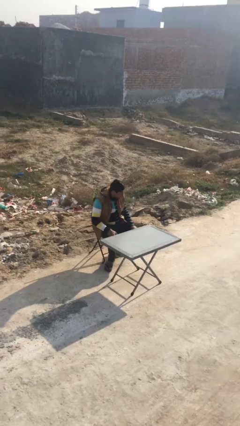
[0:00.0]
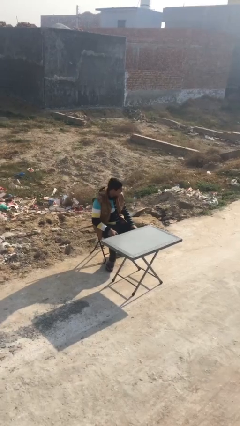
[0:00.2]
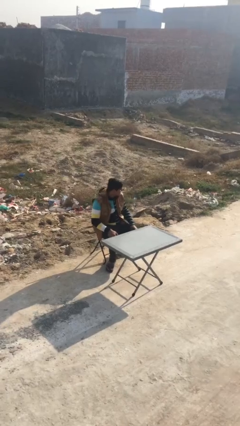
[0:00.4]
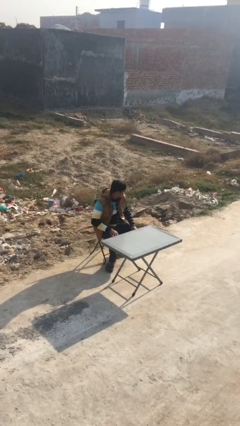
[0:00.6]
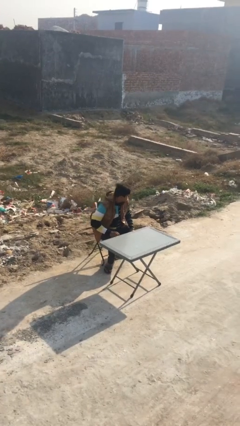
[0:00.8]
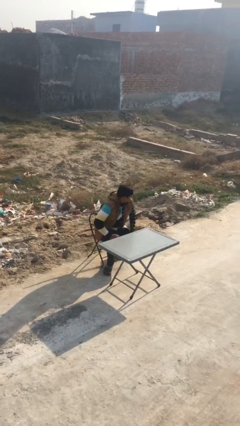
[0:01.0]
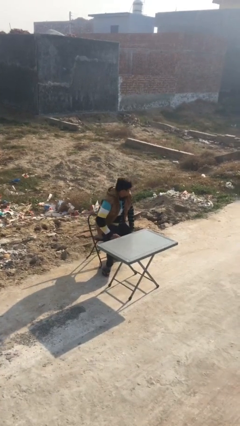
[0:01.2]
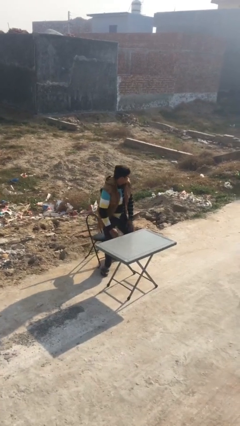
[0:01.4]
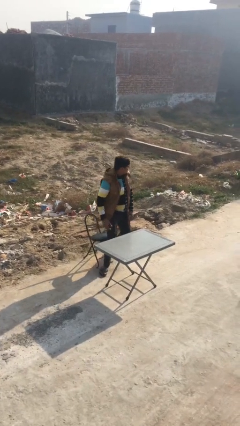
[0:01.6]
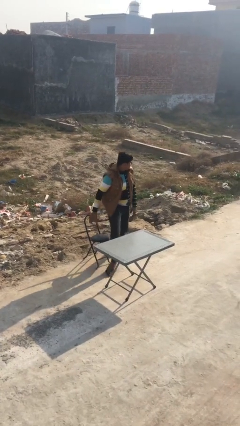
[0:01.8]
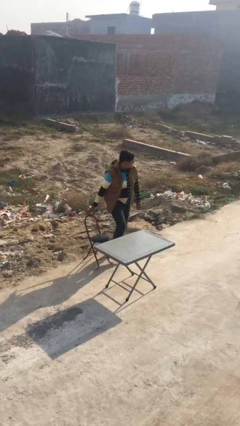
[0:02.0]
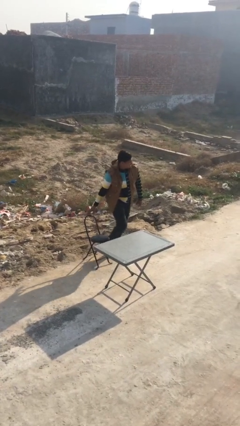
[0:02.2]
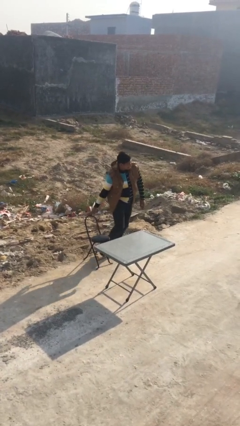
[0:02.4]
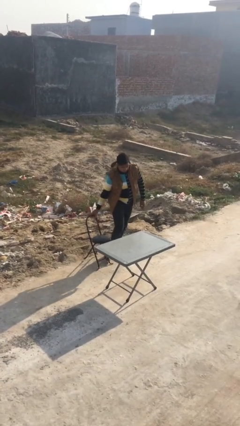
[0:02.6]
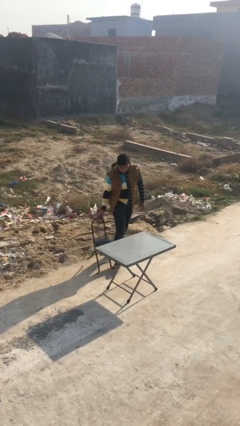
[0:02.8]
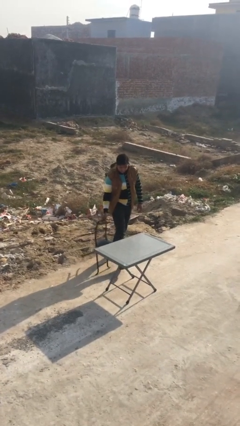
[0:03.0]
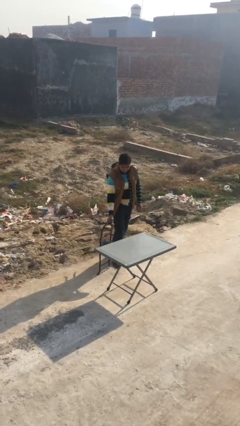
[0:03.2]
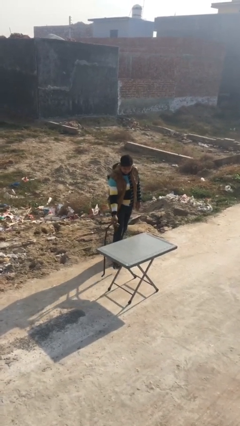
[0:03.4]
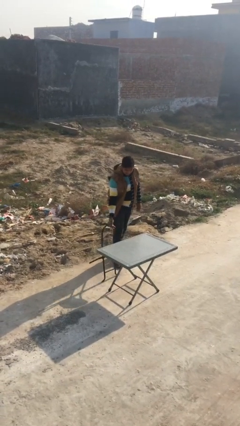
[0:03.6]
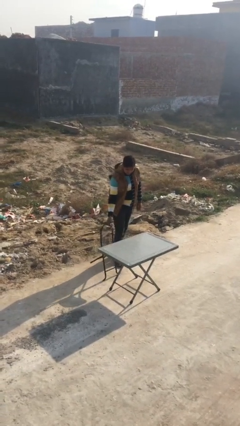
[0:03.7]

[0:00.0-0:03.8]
person stands up

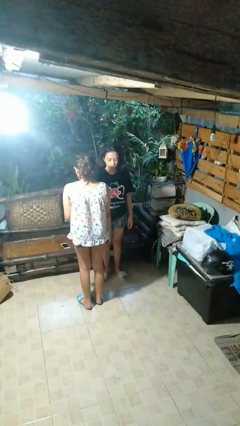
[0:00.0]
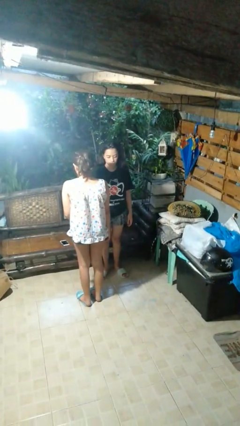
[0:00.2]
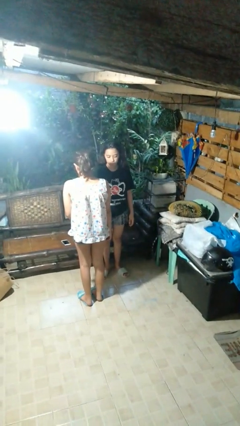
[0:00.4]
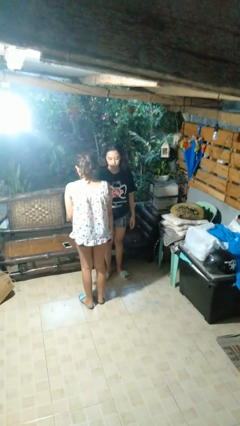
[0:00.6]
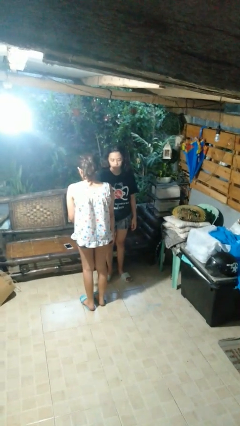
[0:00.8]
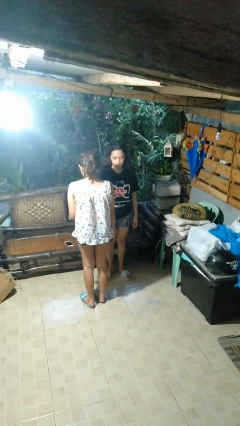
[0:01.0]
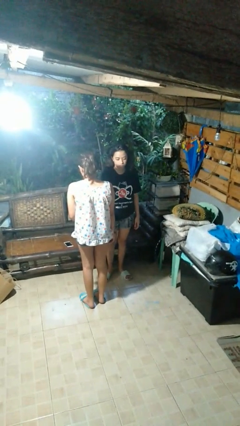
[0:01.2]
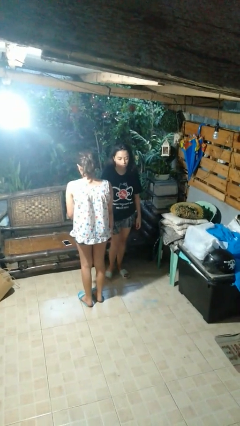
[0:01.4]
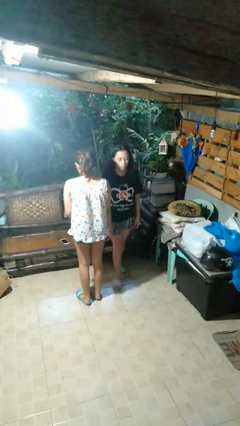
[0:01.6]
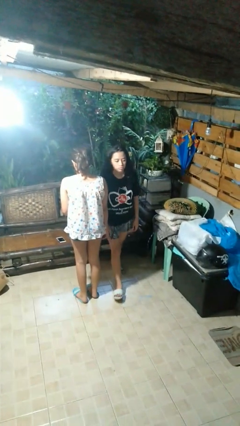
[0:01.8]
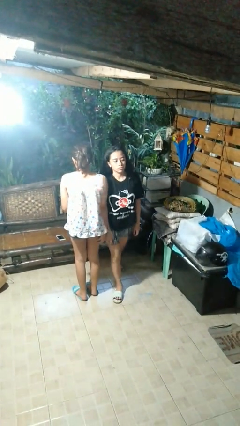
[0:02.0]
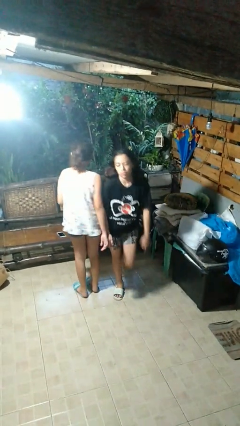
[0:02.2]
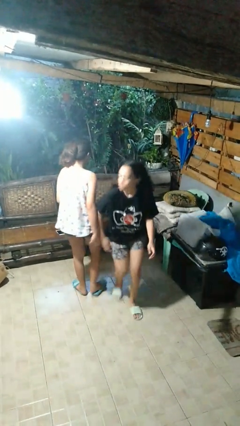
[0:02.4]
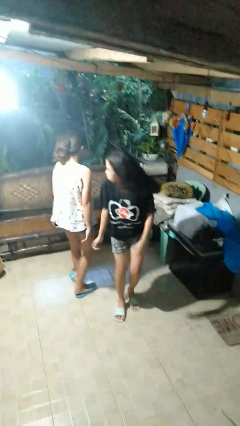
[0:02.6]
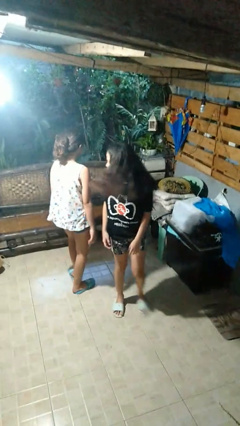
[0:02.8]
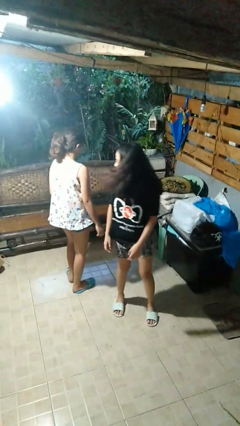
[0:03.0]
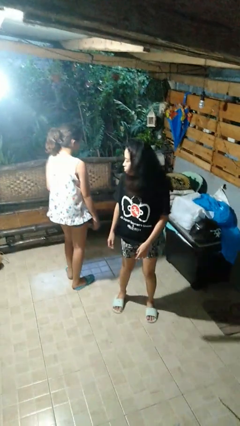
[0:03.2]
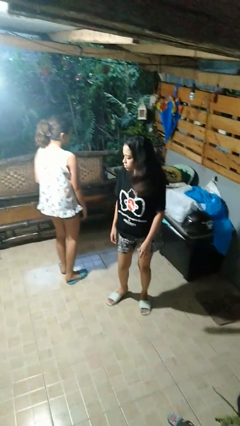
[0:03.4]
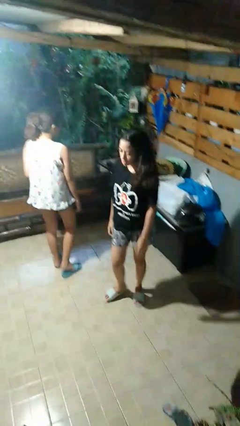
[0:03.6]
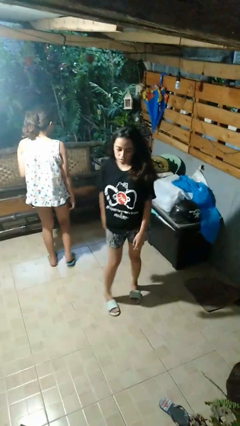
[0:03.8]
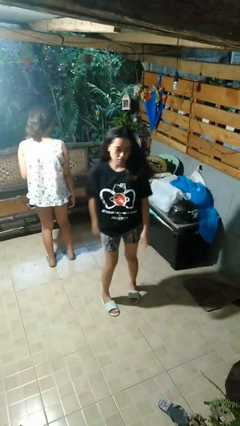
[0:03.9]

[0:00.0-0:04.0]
person bumps into person

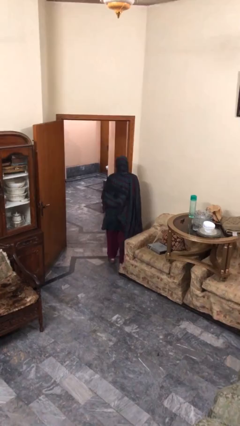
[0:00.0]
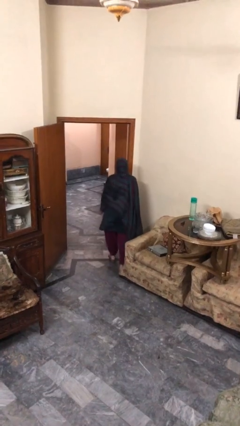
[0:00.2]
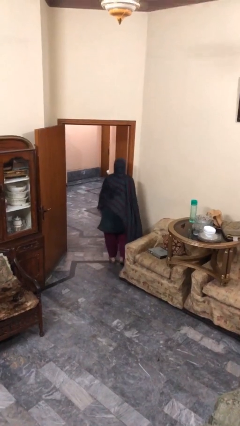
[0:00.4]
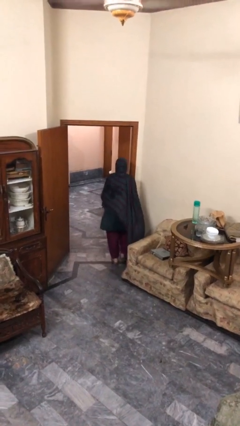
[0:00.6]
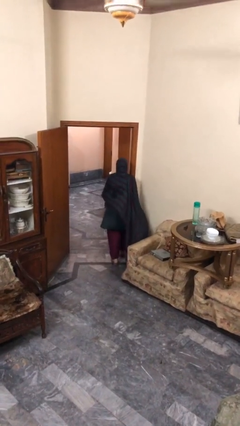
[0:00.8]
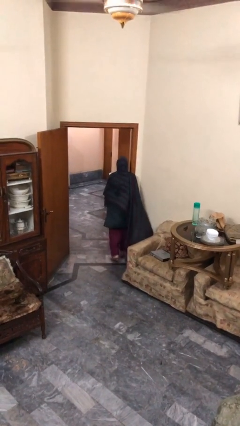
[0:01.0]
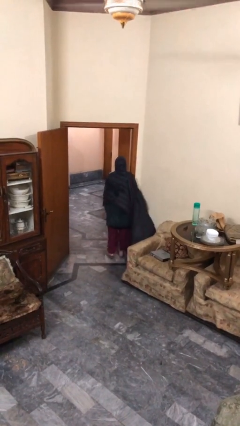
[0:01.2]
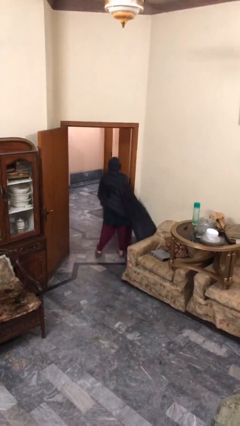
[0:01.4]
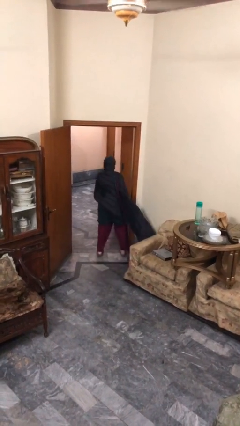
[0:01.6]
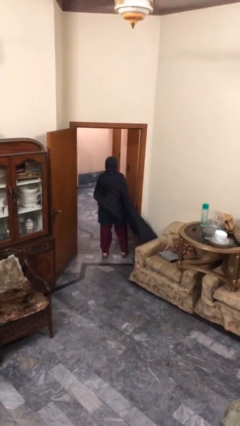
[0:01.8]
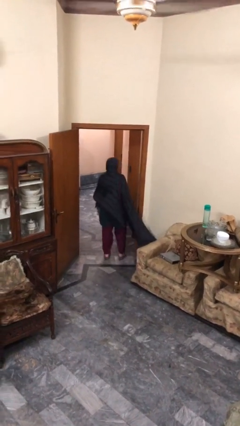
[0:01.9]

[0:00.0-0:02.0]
person bumps into wall

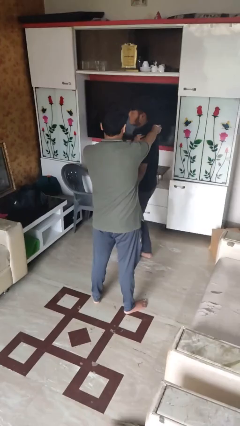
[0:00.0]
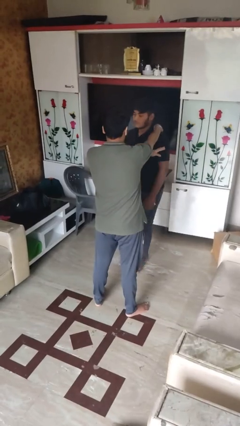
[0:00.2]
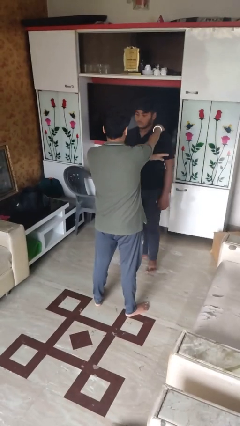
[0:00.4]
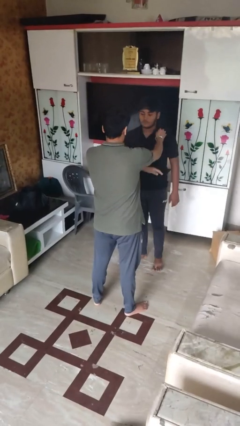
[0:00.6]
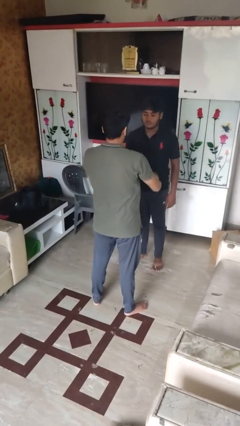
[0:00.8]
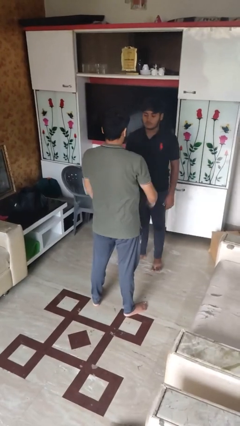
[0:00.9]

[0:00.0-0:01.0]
person spins person around

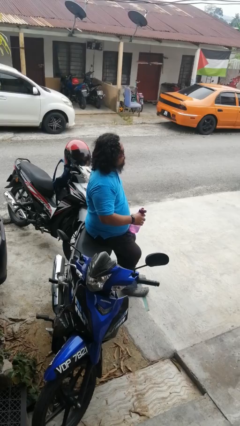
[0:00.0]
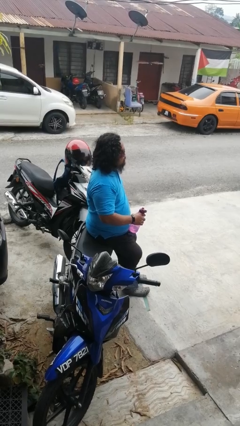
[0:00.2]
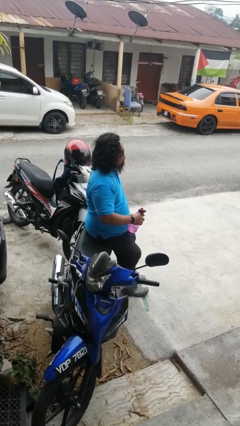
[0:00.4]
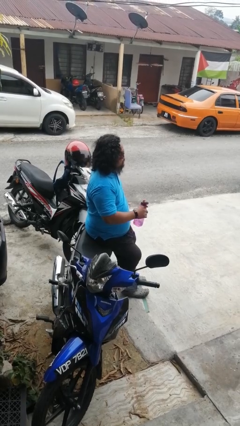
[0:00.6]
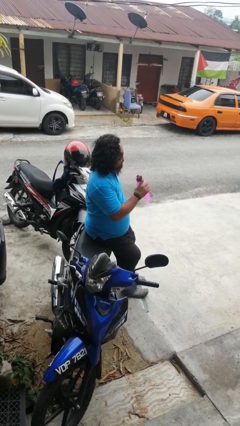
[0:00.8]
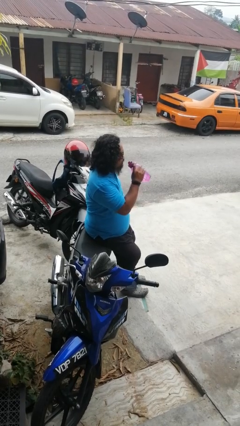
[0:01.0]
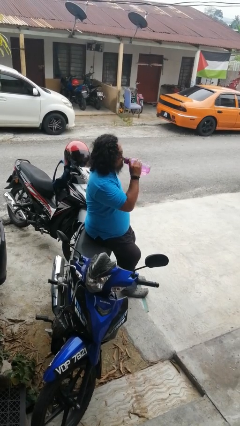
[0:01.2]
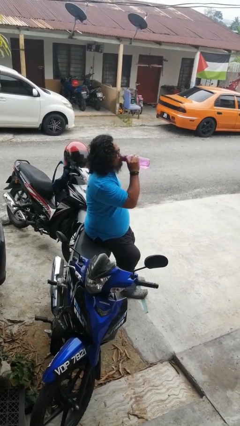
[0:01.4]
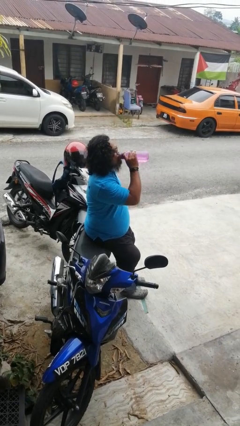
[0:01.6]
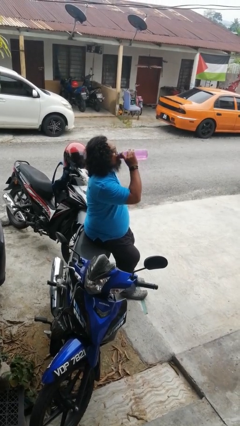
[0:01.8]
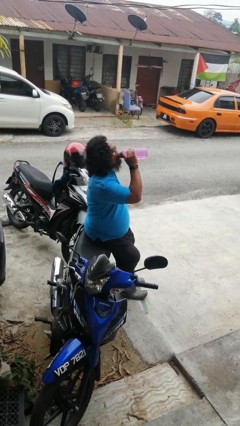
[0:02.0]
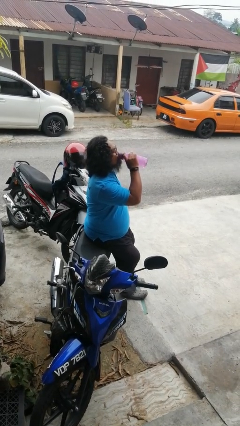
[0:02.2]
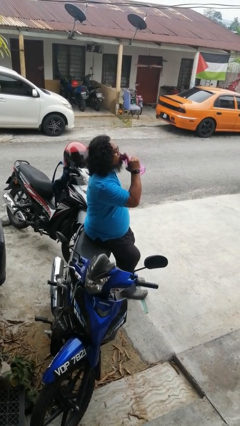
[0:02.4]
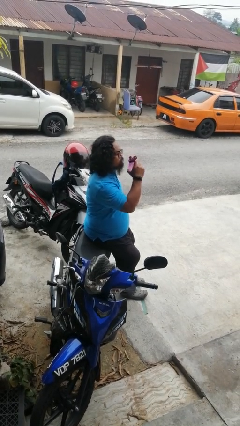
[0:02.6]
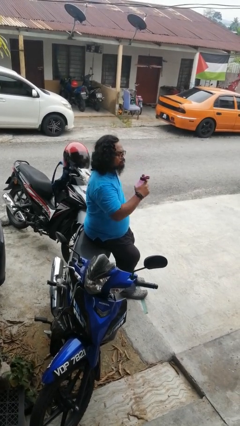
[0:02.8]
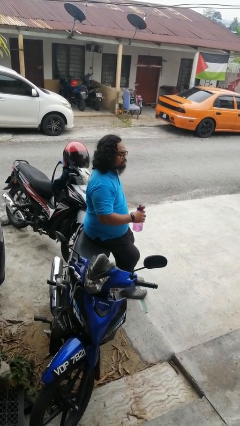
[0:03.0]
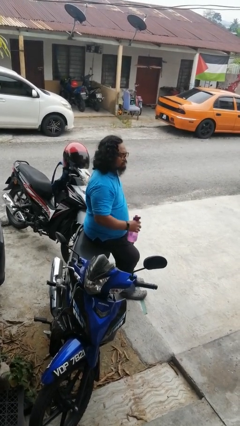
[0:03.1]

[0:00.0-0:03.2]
person drinks from bottle

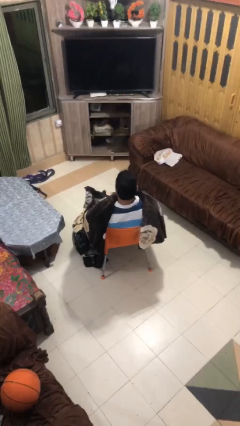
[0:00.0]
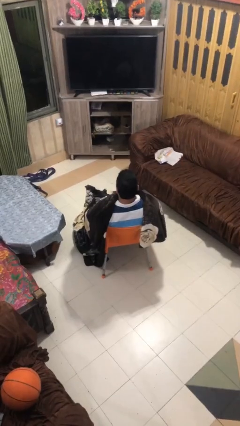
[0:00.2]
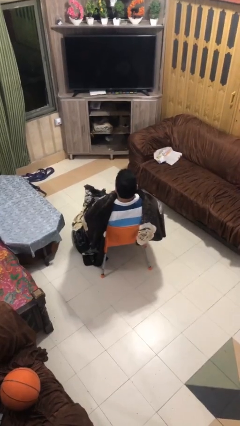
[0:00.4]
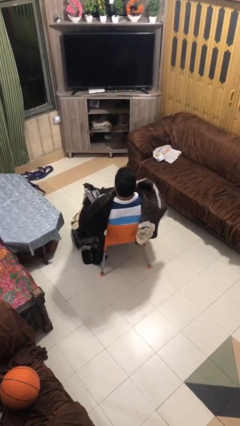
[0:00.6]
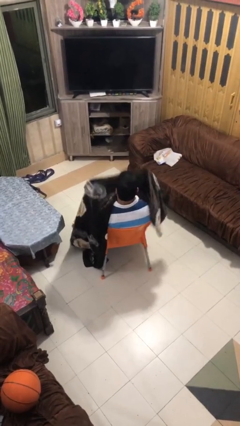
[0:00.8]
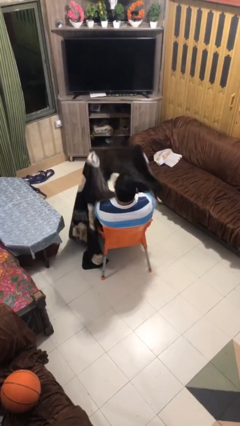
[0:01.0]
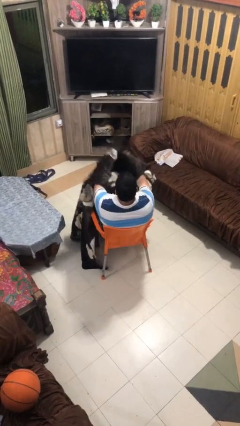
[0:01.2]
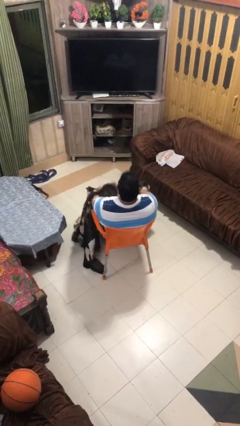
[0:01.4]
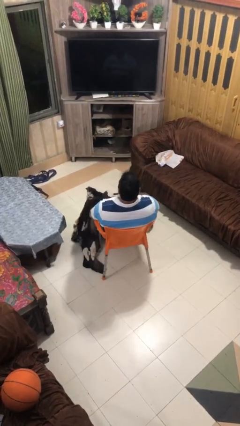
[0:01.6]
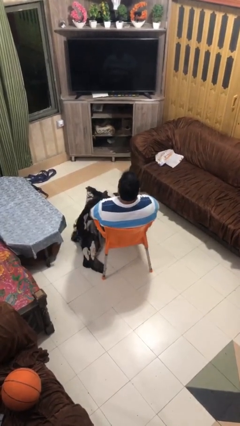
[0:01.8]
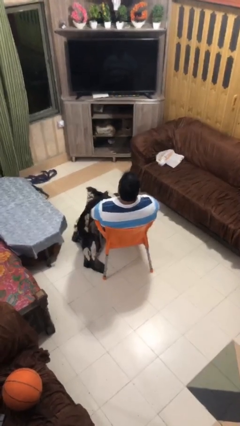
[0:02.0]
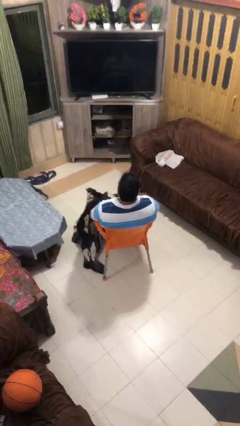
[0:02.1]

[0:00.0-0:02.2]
person uncovers with blanket

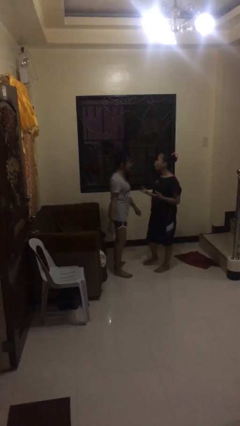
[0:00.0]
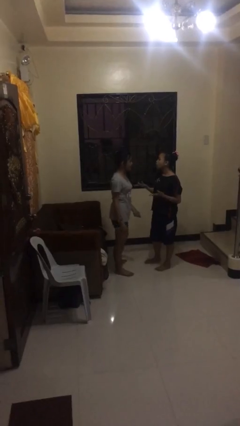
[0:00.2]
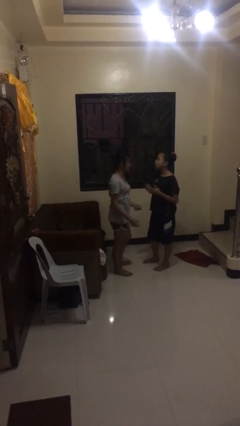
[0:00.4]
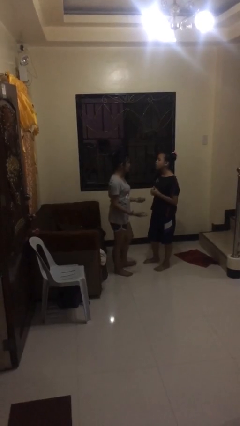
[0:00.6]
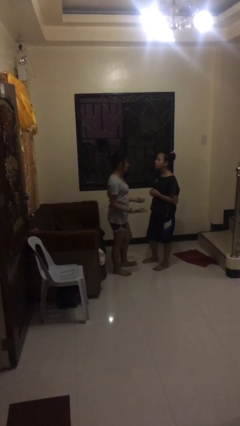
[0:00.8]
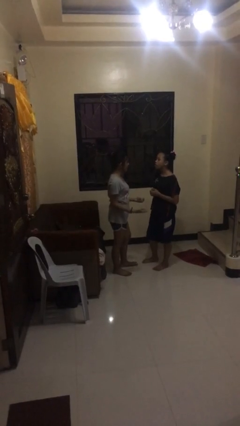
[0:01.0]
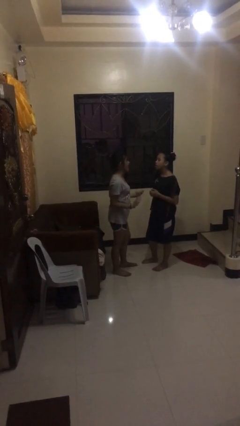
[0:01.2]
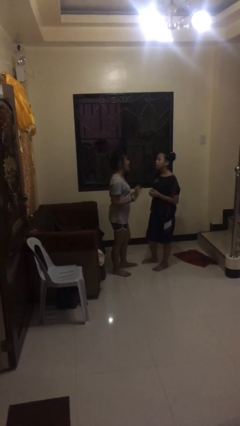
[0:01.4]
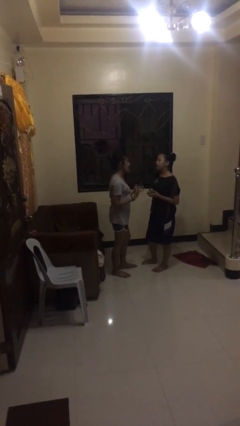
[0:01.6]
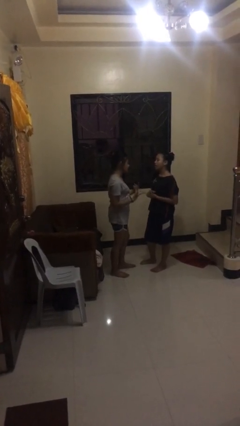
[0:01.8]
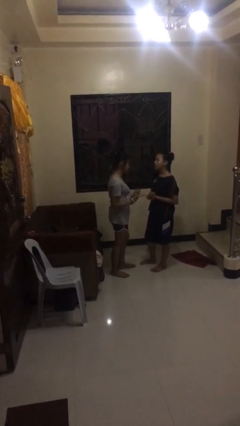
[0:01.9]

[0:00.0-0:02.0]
person talks to person
